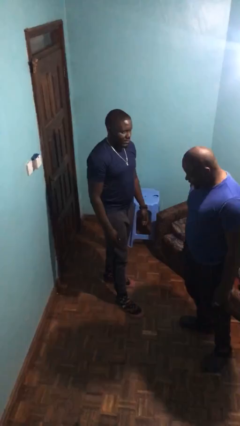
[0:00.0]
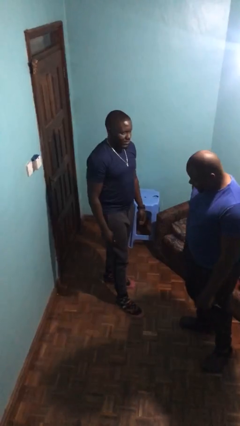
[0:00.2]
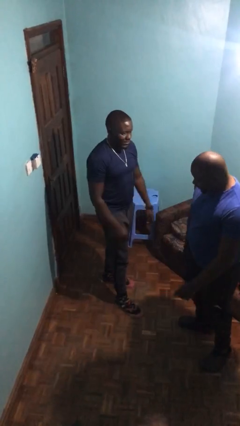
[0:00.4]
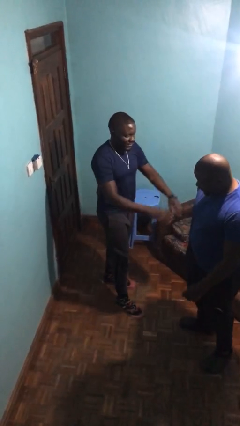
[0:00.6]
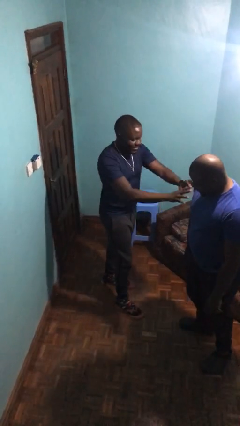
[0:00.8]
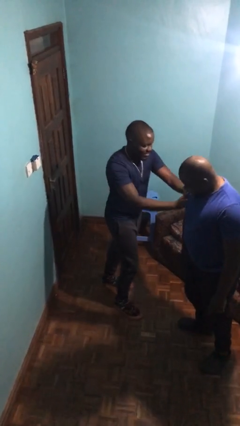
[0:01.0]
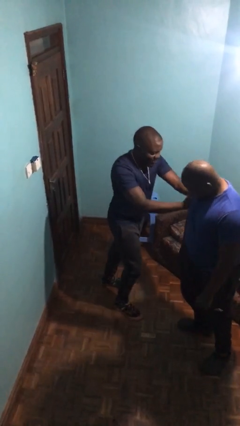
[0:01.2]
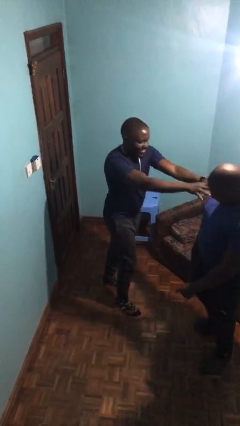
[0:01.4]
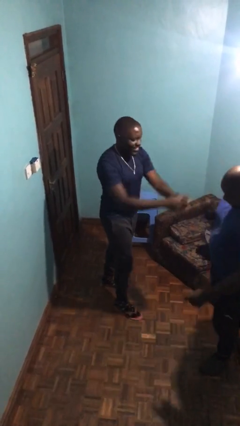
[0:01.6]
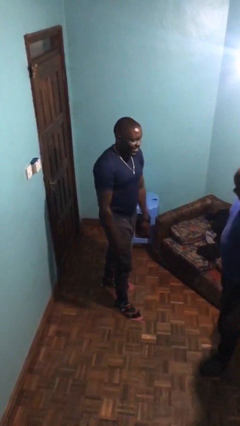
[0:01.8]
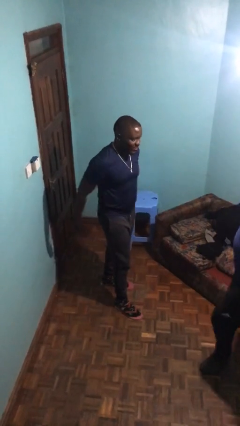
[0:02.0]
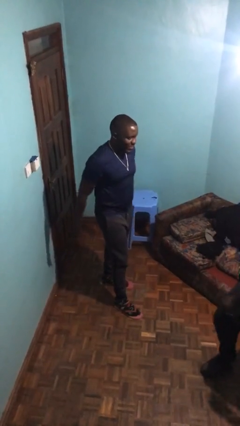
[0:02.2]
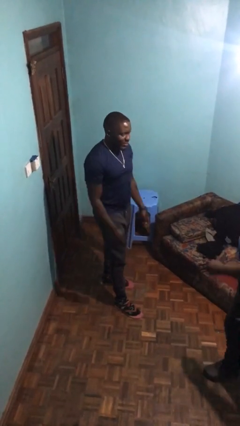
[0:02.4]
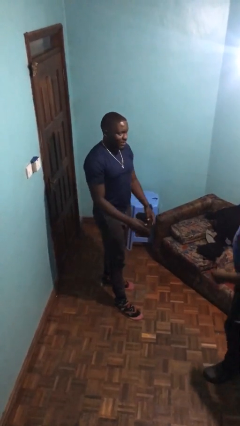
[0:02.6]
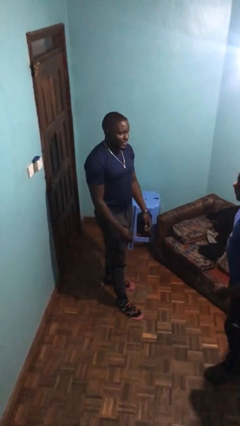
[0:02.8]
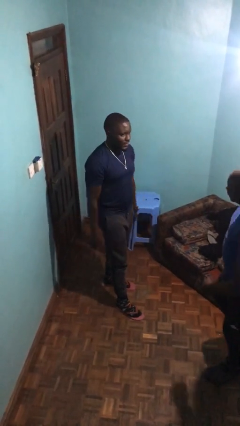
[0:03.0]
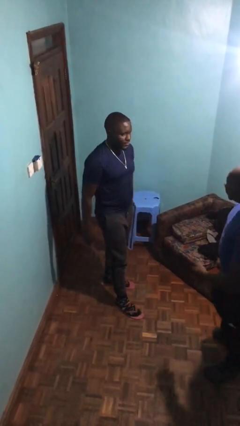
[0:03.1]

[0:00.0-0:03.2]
person shoves person

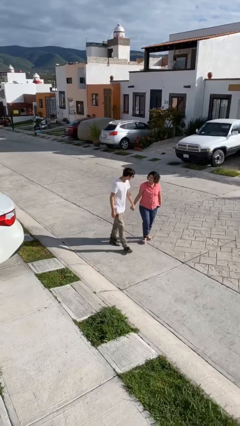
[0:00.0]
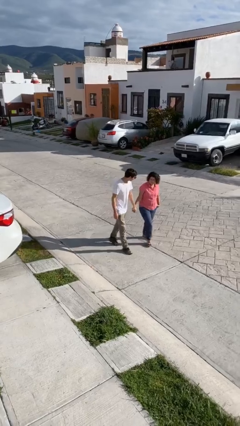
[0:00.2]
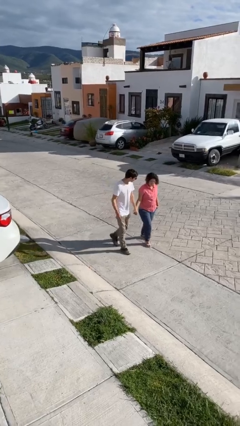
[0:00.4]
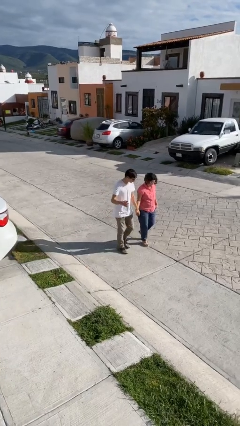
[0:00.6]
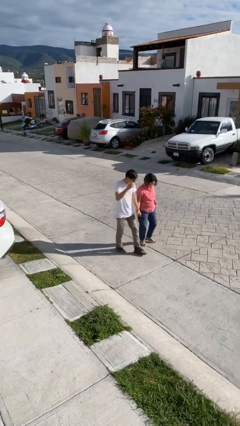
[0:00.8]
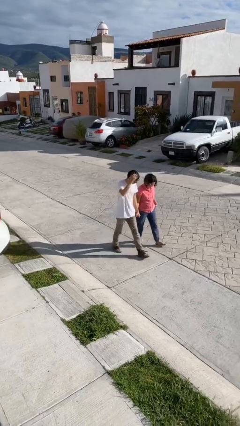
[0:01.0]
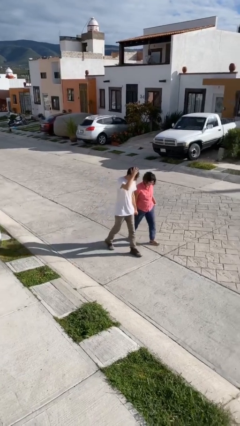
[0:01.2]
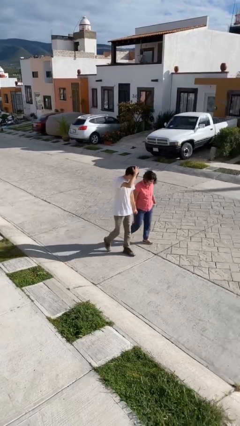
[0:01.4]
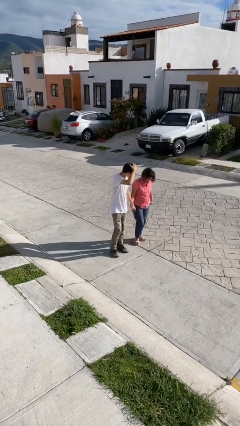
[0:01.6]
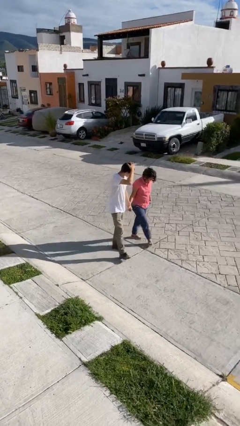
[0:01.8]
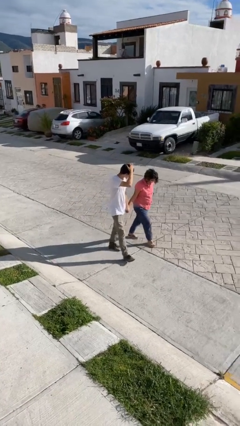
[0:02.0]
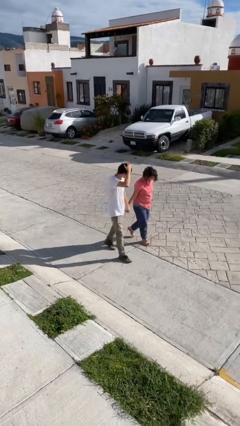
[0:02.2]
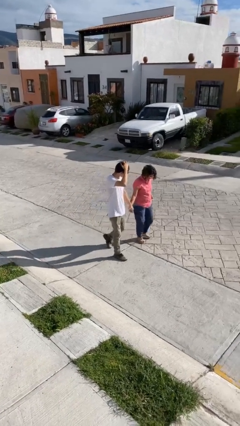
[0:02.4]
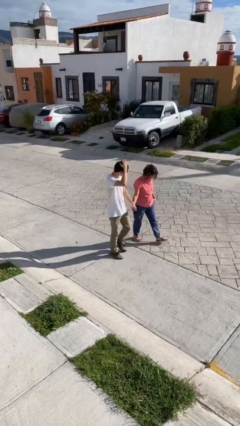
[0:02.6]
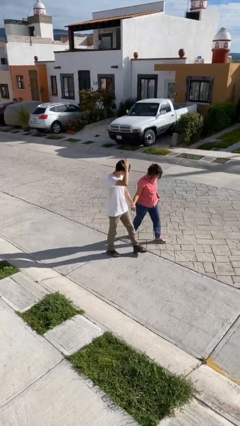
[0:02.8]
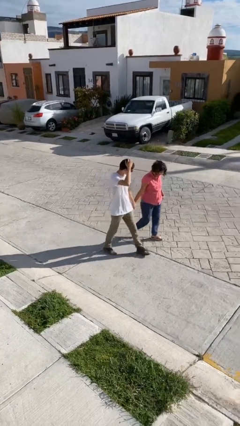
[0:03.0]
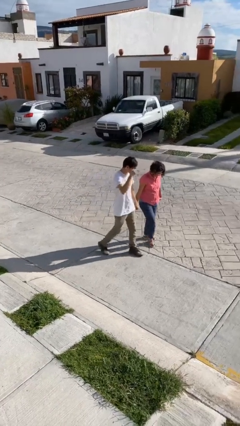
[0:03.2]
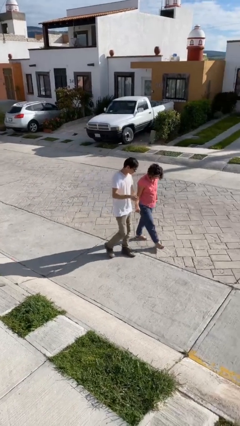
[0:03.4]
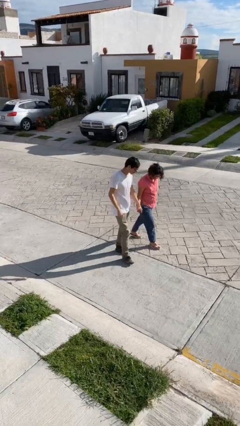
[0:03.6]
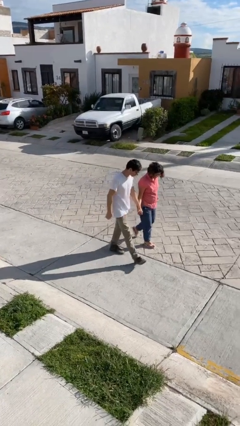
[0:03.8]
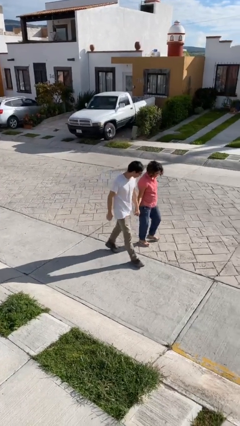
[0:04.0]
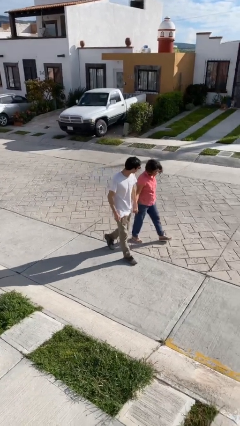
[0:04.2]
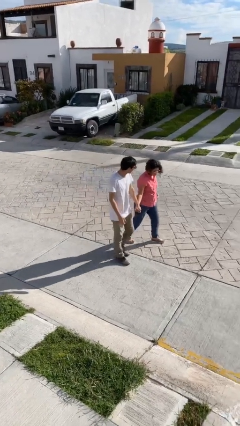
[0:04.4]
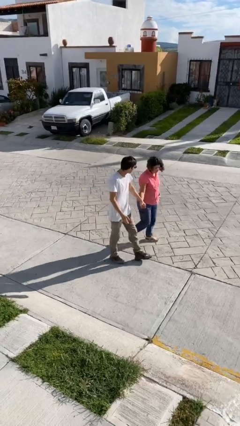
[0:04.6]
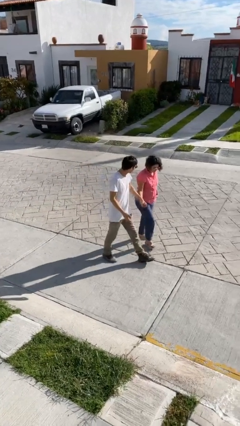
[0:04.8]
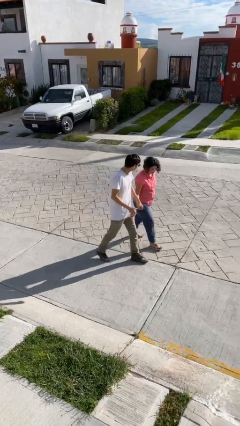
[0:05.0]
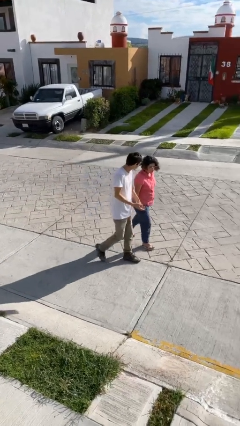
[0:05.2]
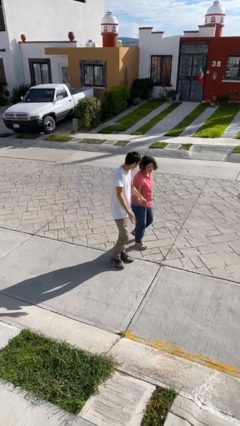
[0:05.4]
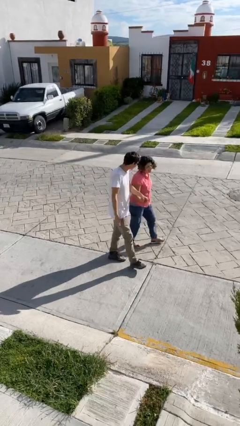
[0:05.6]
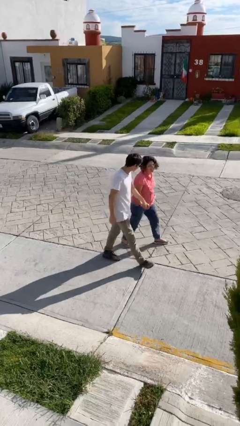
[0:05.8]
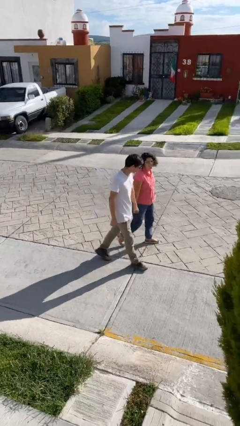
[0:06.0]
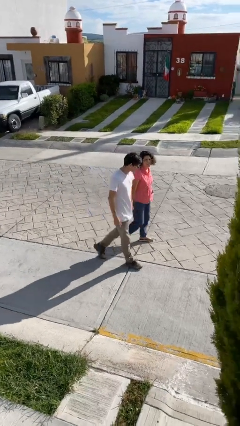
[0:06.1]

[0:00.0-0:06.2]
person holds hand

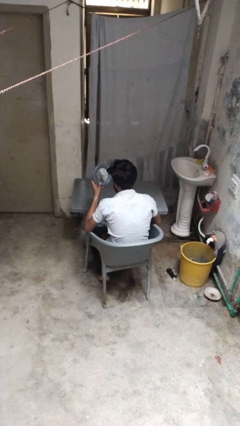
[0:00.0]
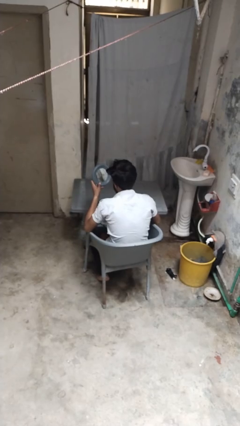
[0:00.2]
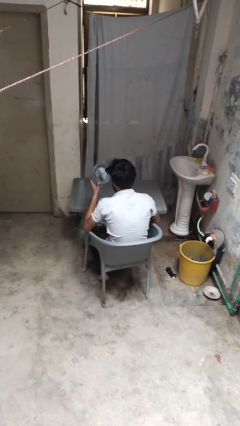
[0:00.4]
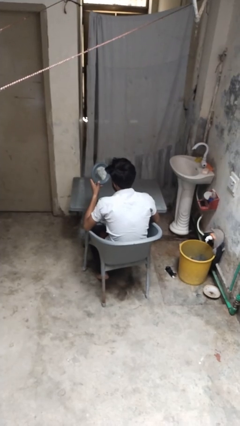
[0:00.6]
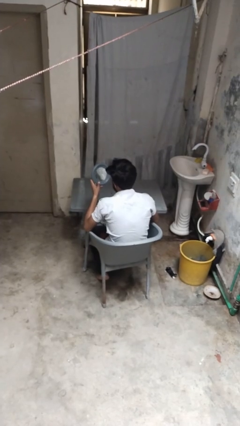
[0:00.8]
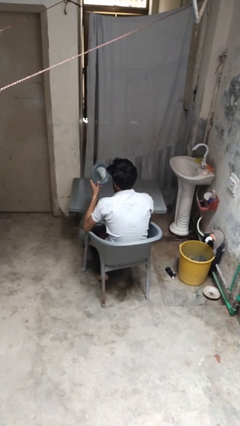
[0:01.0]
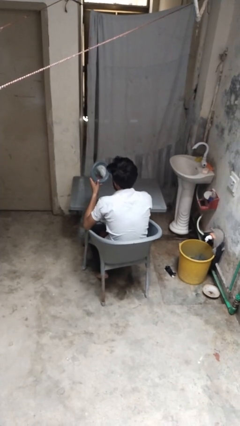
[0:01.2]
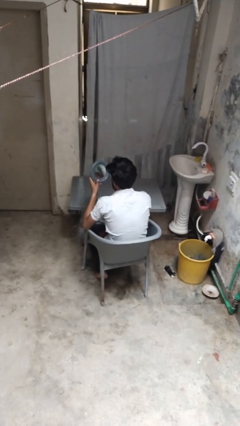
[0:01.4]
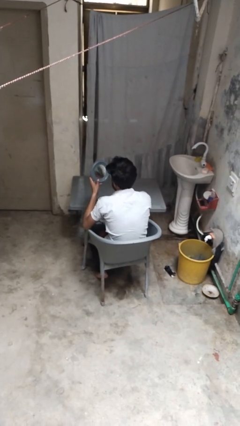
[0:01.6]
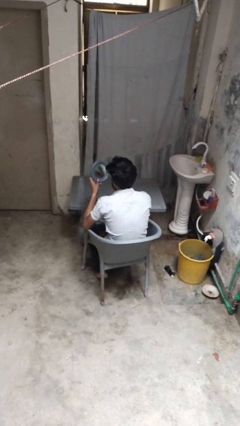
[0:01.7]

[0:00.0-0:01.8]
person applies lip makeup

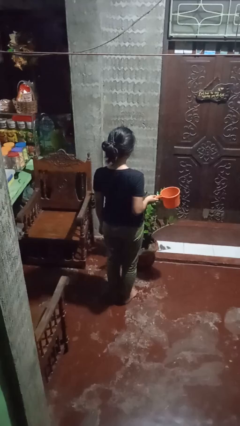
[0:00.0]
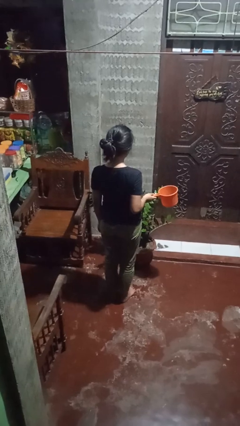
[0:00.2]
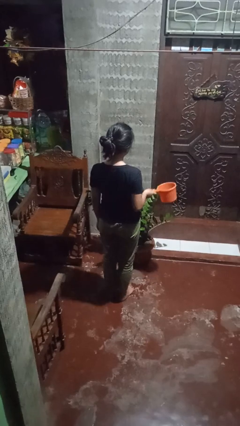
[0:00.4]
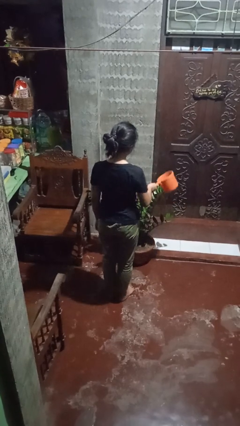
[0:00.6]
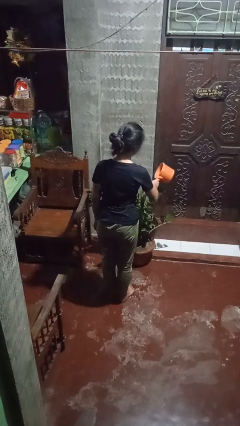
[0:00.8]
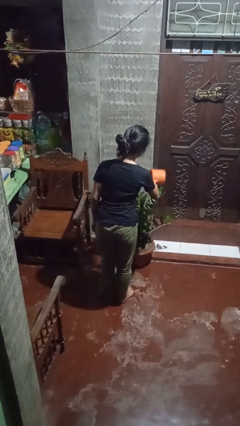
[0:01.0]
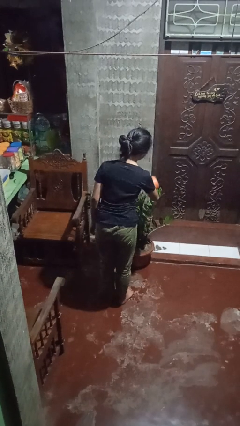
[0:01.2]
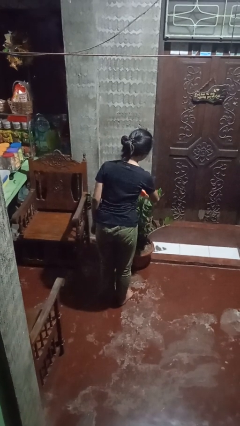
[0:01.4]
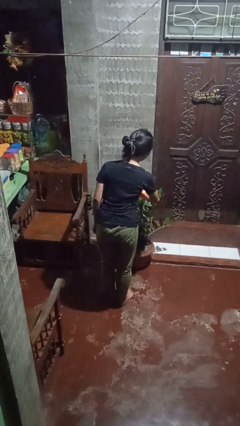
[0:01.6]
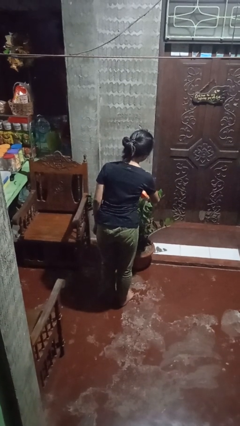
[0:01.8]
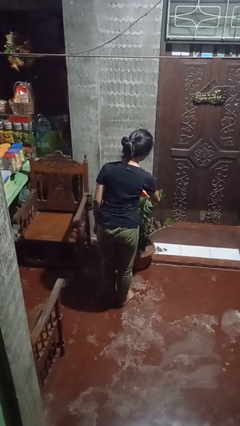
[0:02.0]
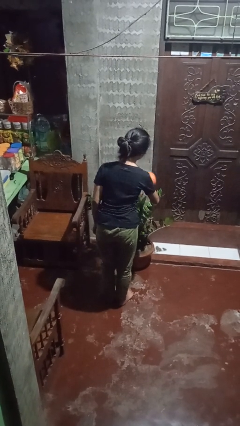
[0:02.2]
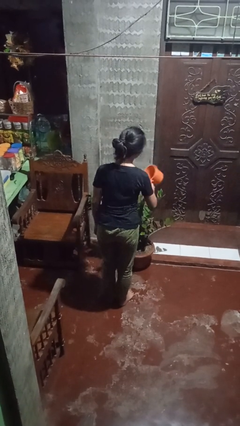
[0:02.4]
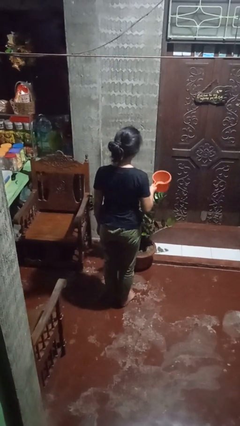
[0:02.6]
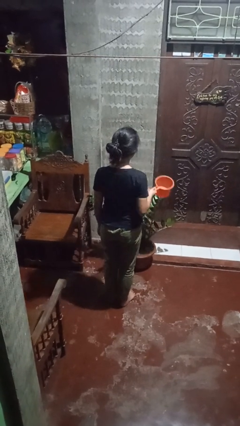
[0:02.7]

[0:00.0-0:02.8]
person waters houseplant

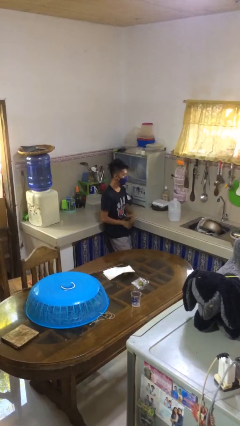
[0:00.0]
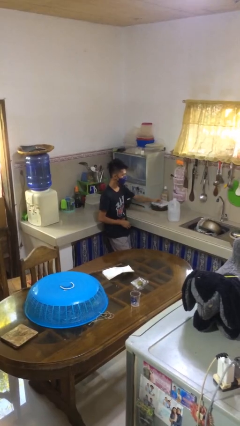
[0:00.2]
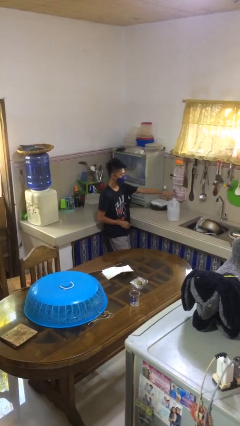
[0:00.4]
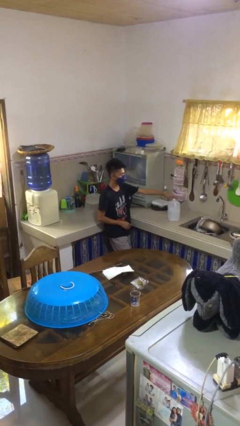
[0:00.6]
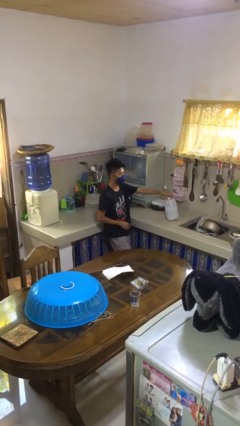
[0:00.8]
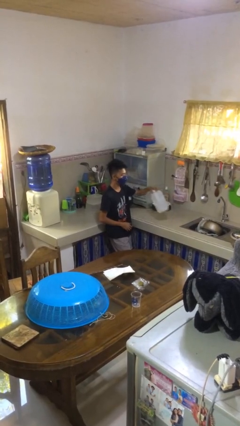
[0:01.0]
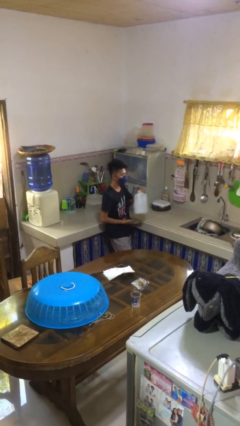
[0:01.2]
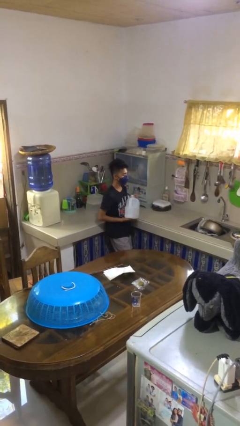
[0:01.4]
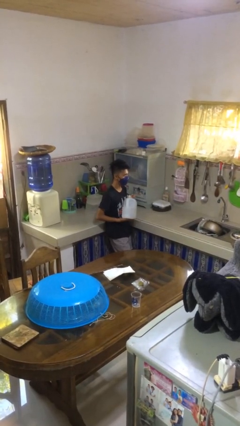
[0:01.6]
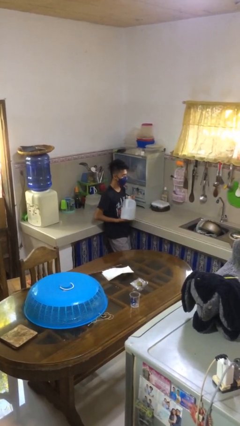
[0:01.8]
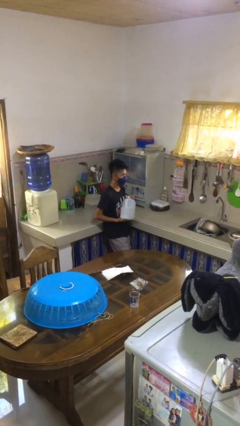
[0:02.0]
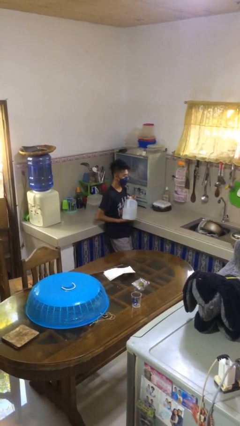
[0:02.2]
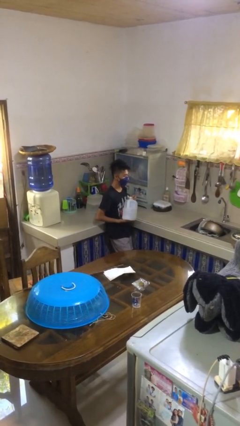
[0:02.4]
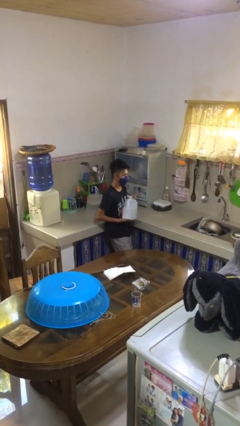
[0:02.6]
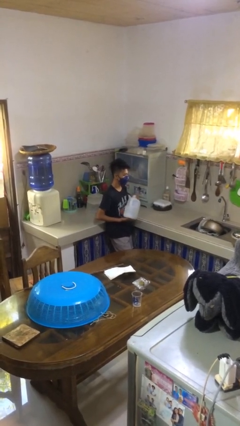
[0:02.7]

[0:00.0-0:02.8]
person picks up object from countertop

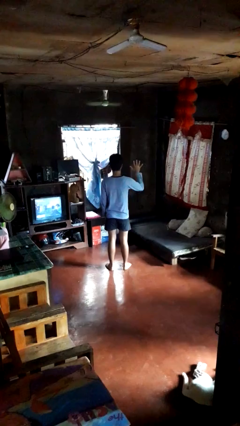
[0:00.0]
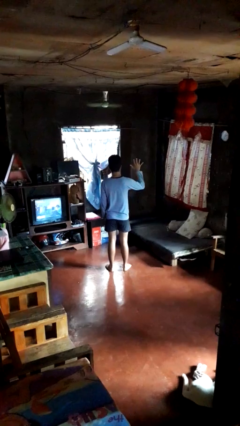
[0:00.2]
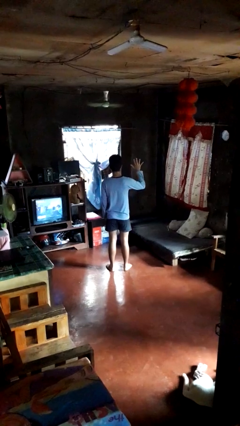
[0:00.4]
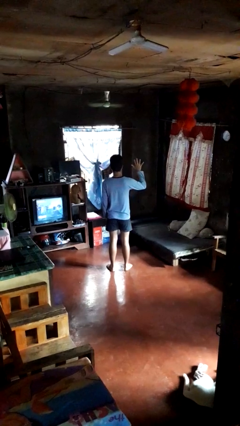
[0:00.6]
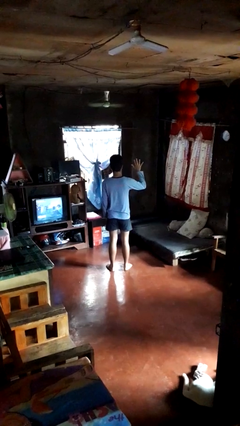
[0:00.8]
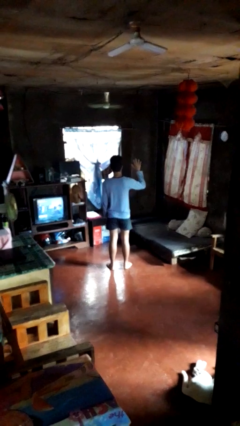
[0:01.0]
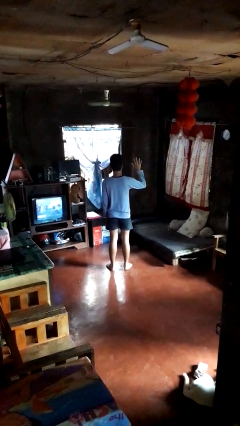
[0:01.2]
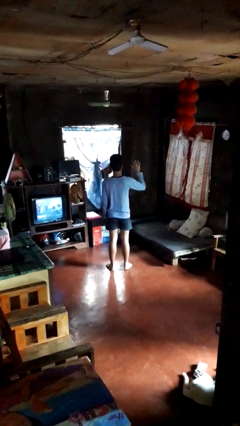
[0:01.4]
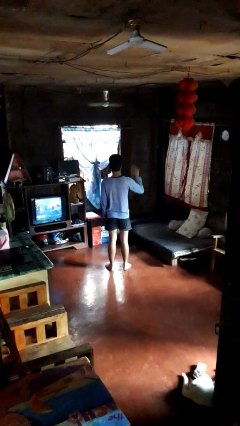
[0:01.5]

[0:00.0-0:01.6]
person gestures number five
